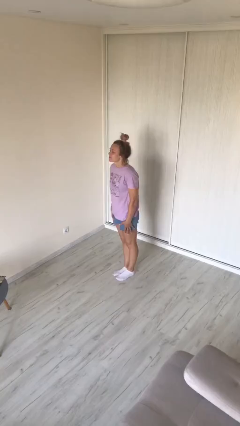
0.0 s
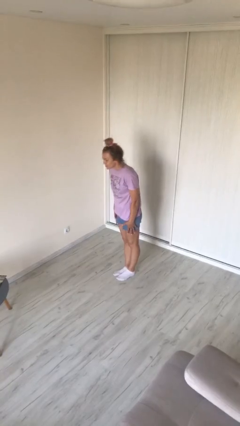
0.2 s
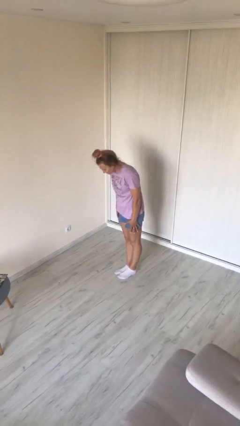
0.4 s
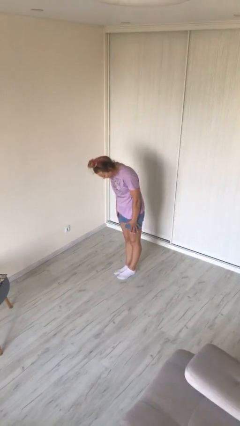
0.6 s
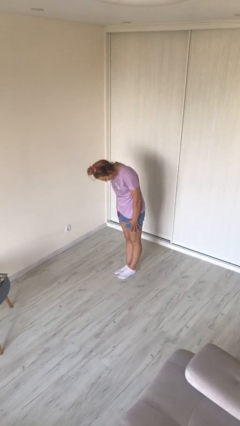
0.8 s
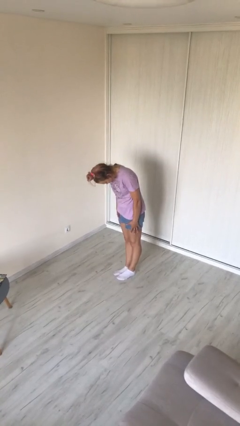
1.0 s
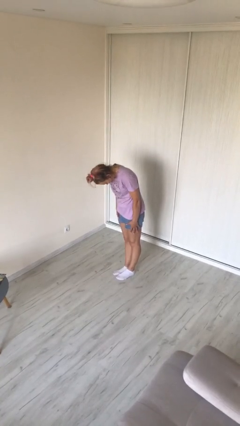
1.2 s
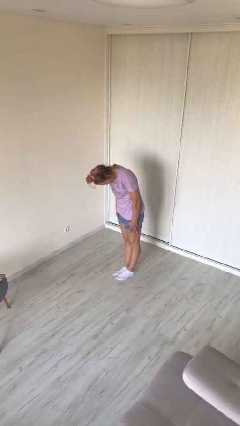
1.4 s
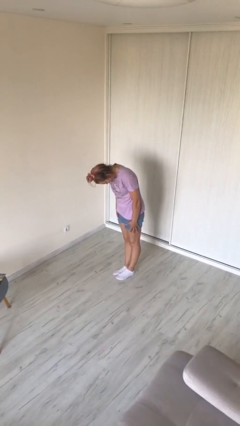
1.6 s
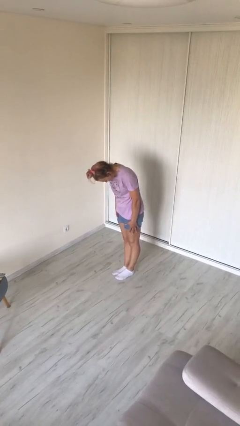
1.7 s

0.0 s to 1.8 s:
person bows

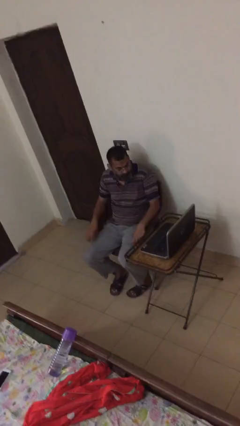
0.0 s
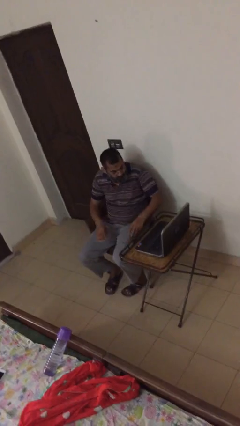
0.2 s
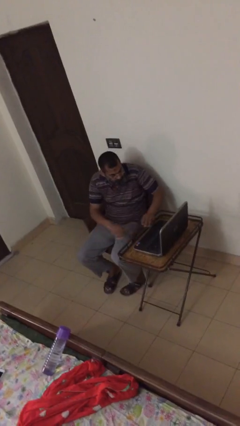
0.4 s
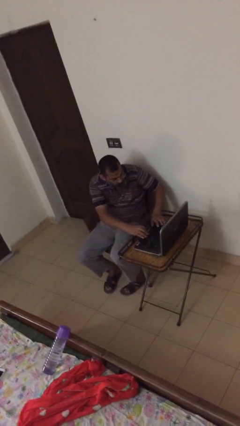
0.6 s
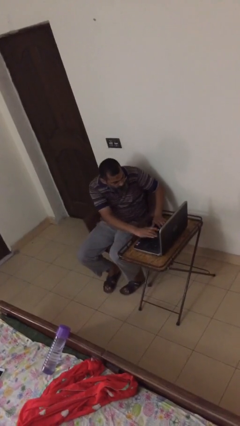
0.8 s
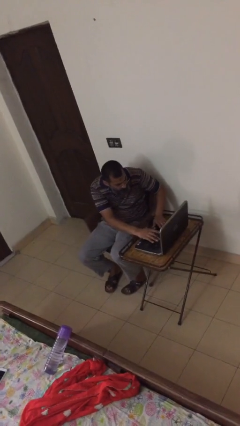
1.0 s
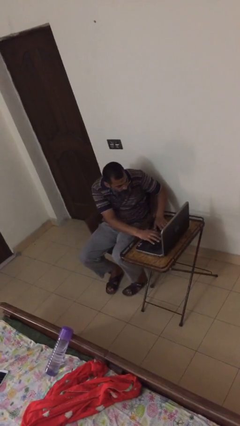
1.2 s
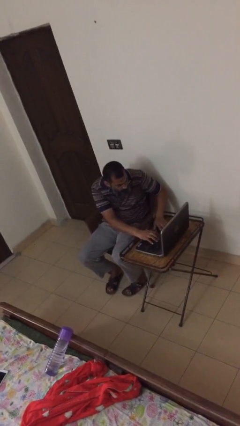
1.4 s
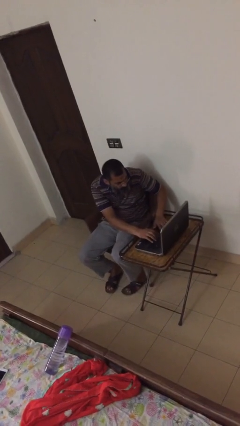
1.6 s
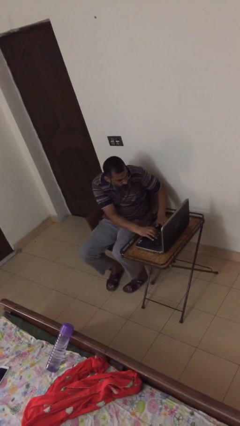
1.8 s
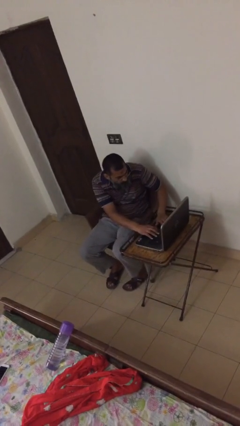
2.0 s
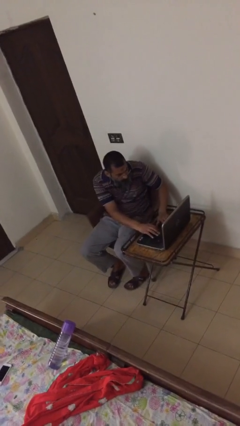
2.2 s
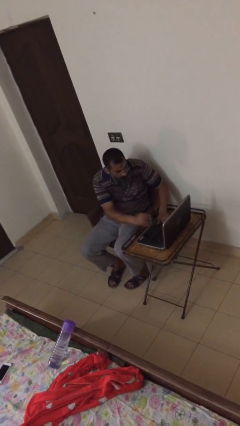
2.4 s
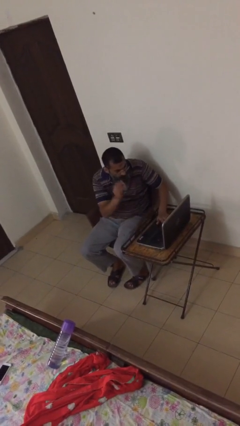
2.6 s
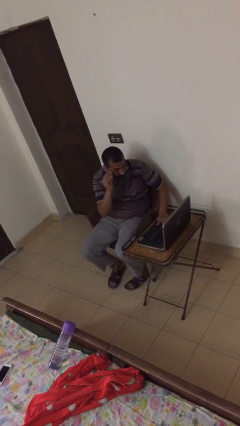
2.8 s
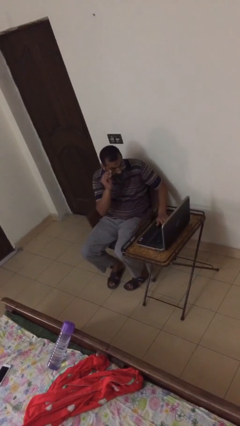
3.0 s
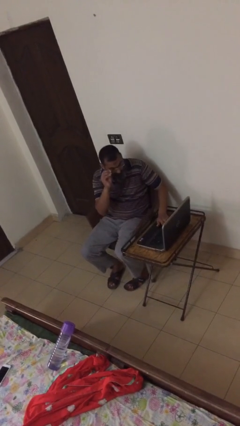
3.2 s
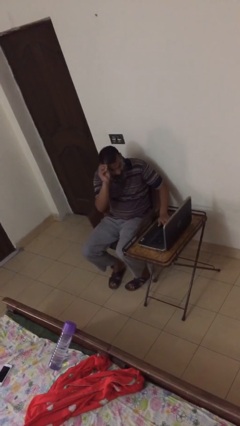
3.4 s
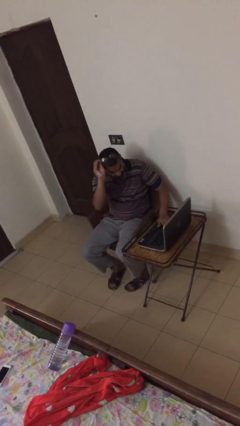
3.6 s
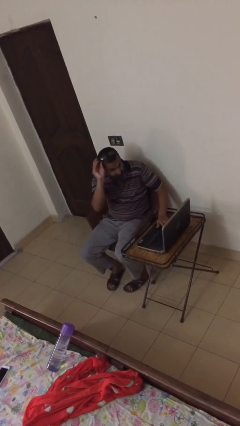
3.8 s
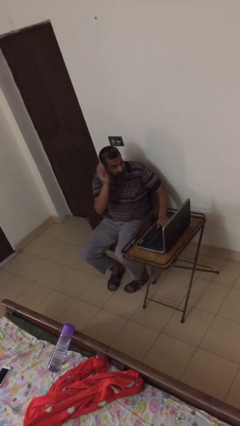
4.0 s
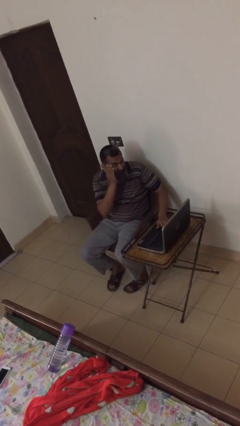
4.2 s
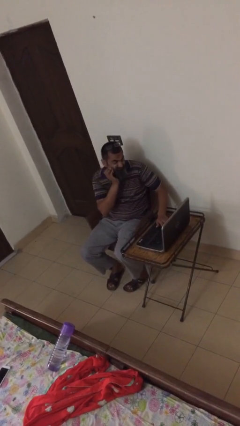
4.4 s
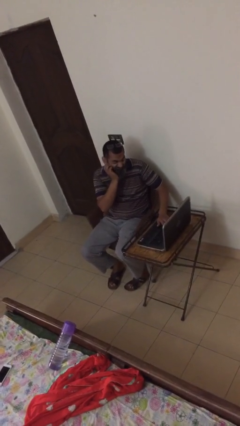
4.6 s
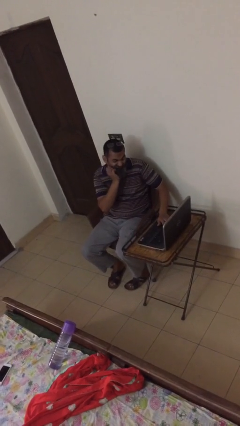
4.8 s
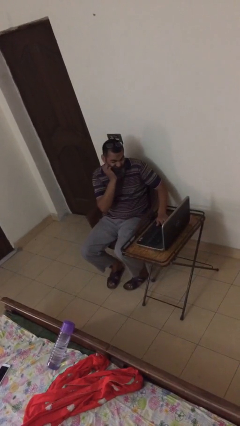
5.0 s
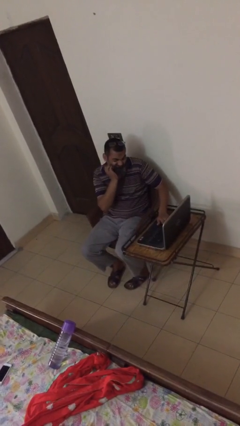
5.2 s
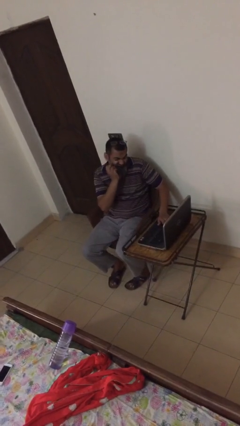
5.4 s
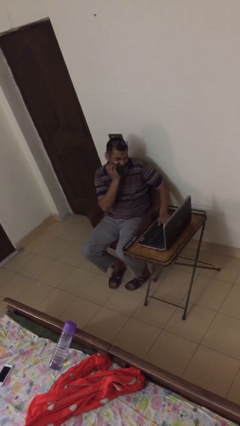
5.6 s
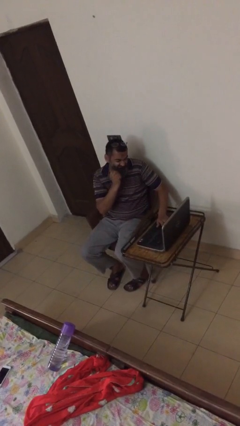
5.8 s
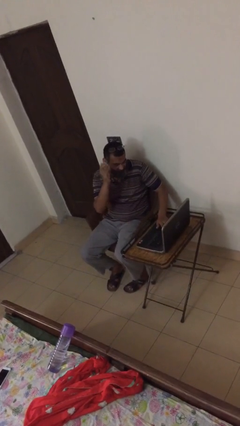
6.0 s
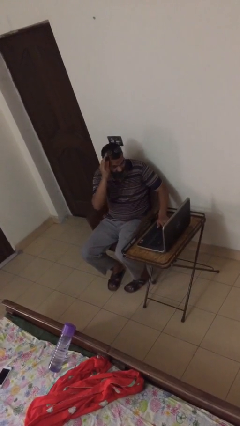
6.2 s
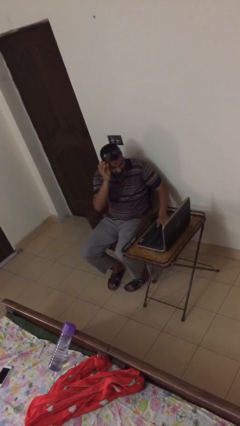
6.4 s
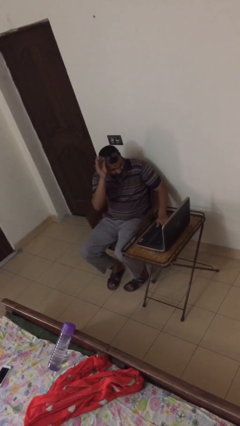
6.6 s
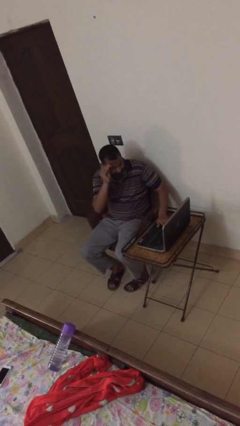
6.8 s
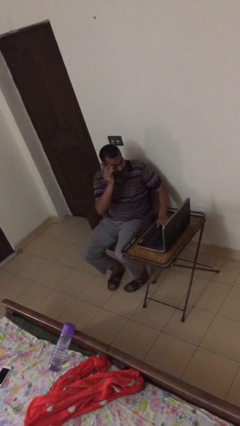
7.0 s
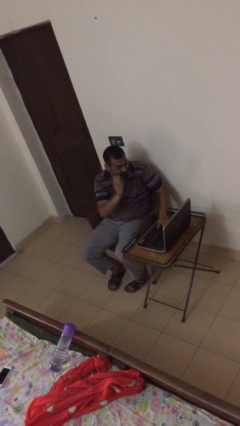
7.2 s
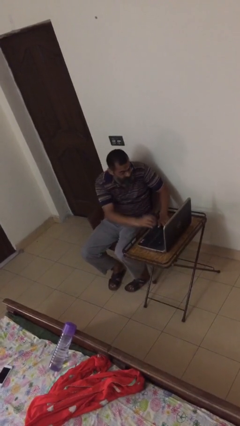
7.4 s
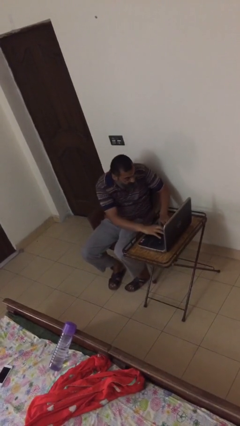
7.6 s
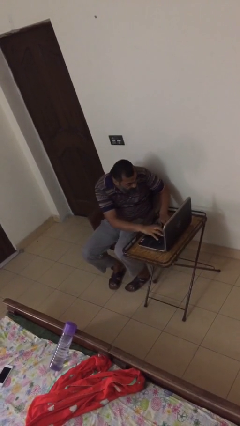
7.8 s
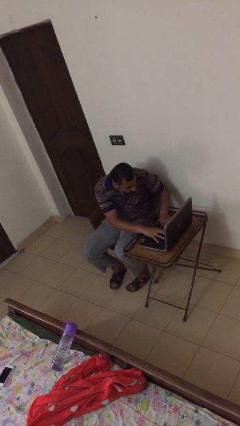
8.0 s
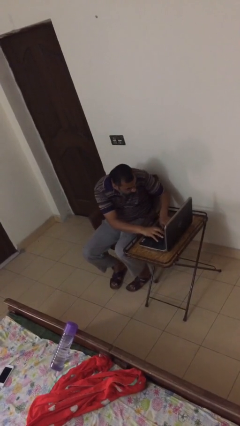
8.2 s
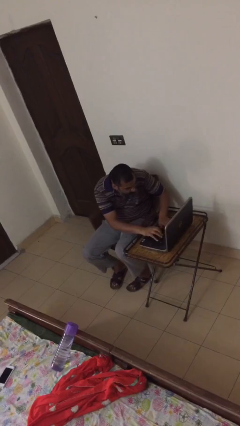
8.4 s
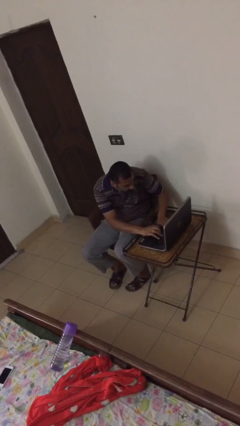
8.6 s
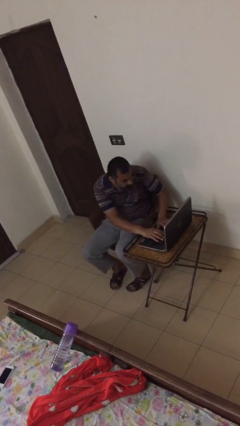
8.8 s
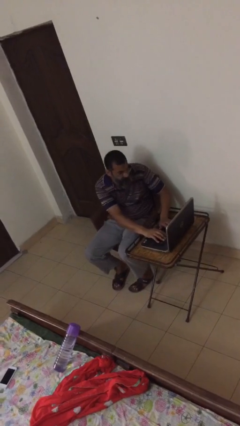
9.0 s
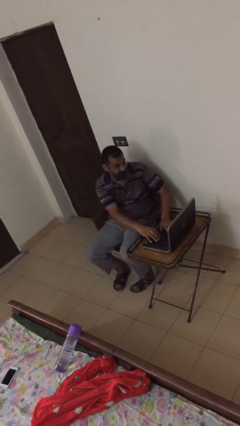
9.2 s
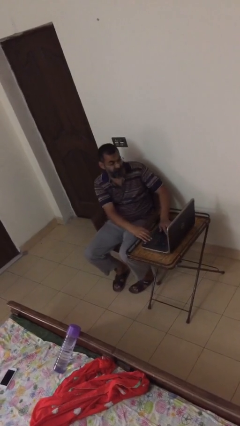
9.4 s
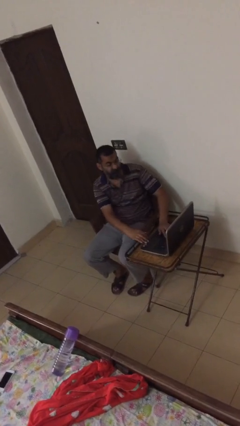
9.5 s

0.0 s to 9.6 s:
person interacts with laptop

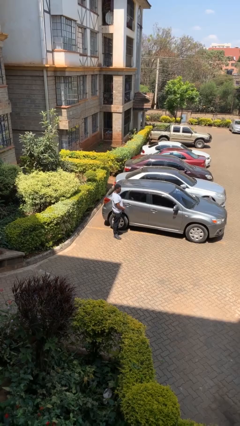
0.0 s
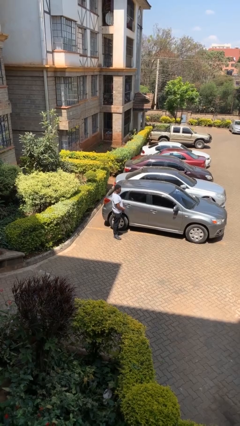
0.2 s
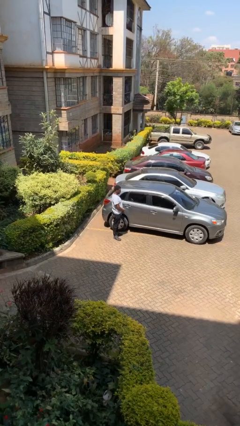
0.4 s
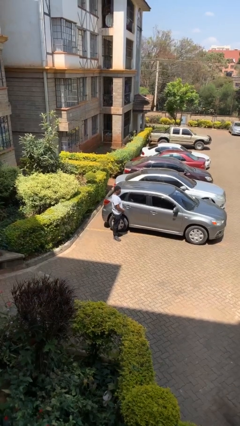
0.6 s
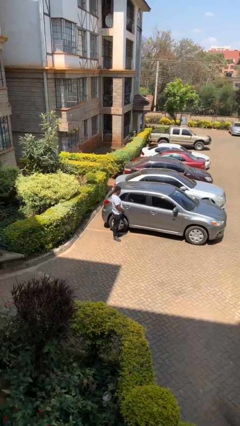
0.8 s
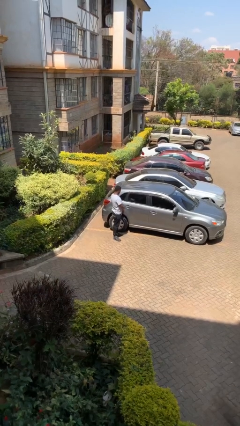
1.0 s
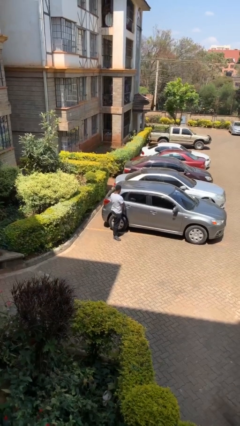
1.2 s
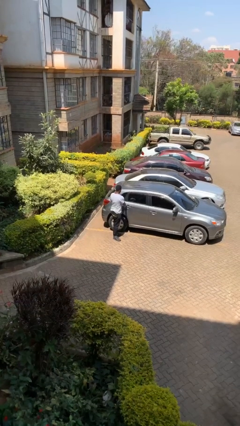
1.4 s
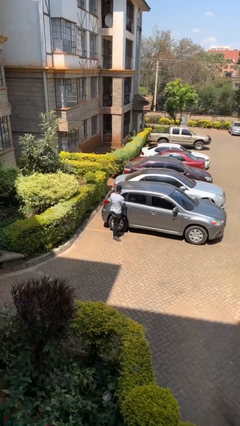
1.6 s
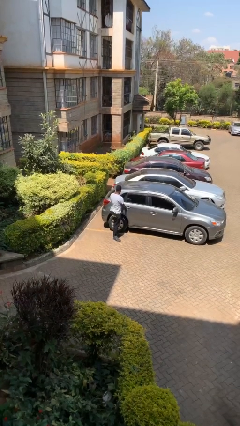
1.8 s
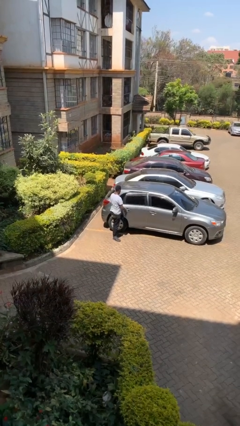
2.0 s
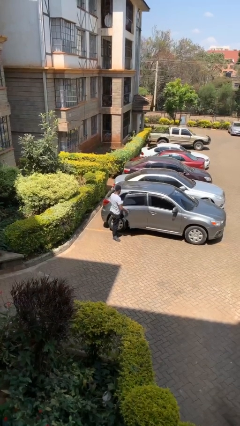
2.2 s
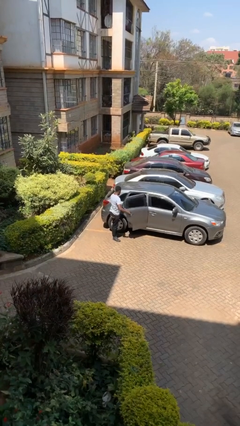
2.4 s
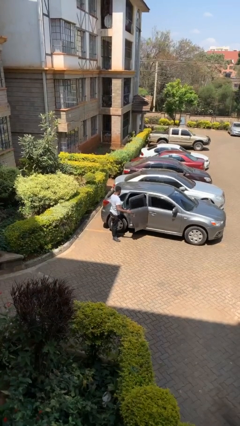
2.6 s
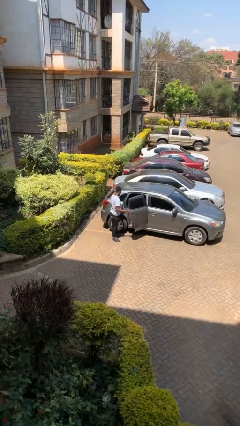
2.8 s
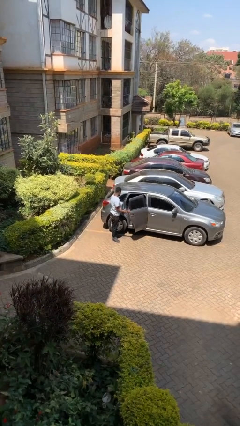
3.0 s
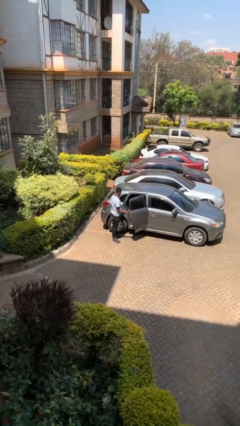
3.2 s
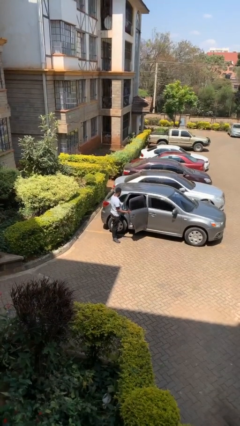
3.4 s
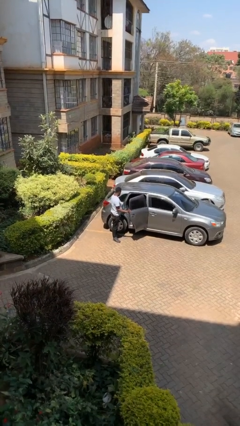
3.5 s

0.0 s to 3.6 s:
person opens car door

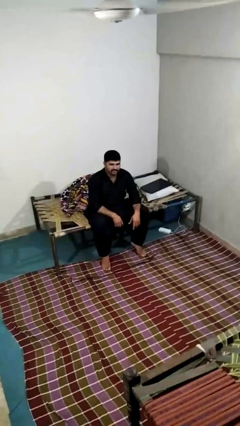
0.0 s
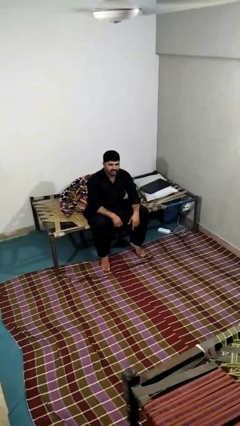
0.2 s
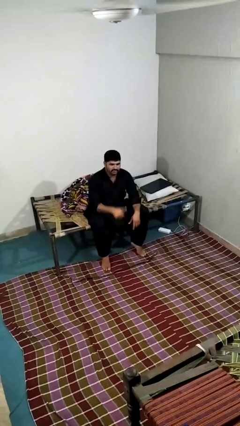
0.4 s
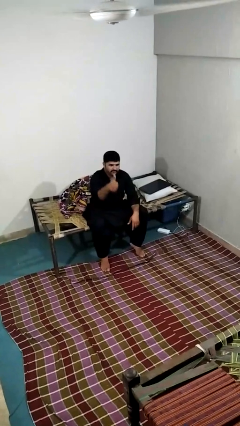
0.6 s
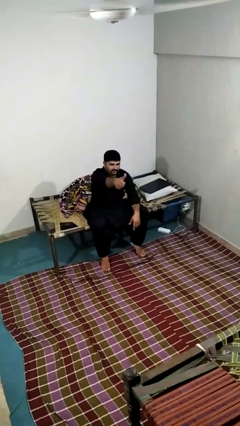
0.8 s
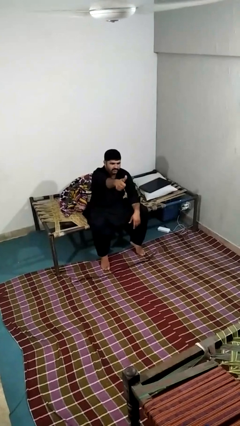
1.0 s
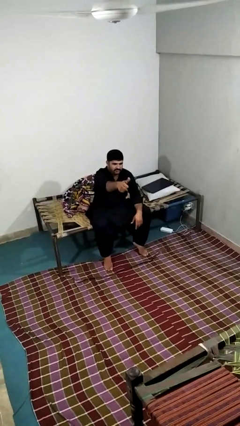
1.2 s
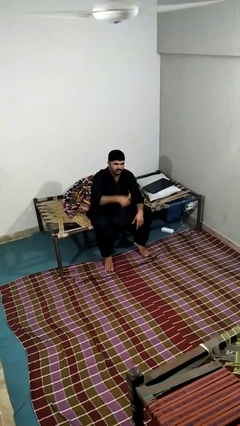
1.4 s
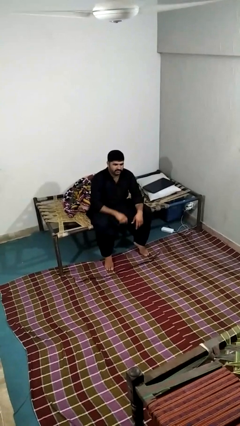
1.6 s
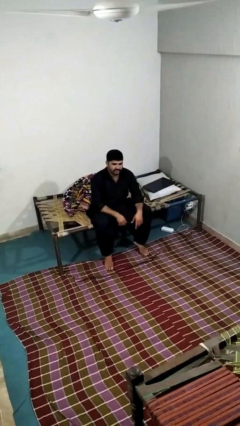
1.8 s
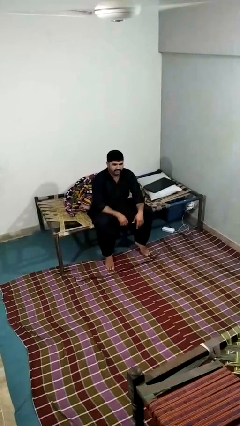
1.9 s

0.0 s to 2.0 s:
person gestures thumbs up

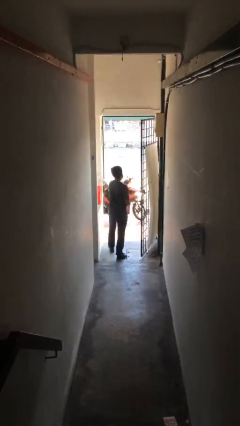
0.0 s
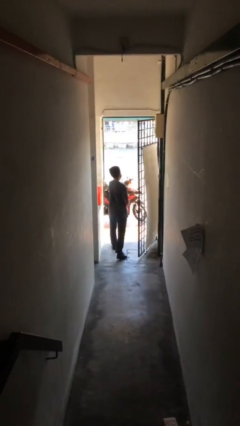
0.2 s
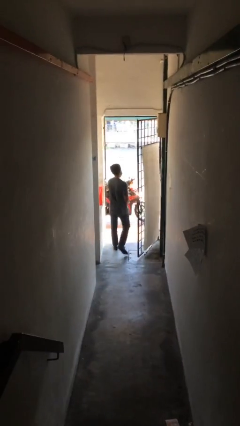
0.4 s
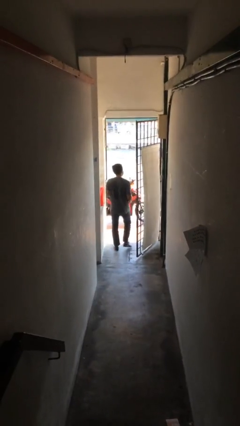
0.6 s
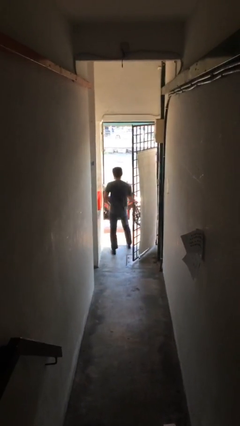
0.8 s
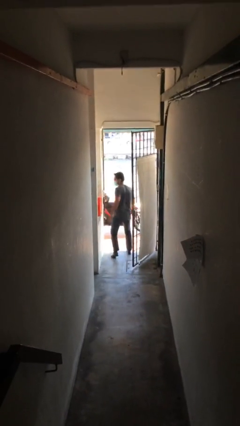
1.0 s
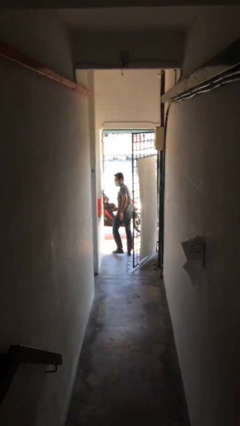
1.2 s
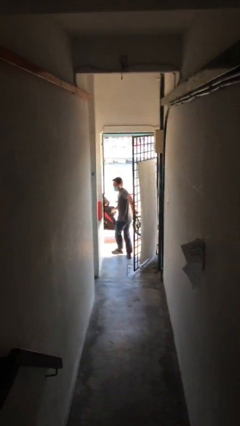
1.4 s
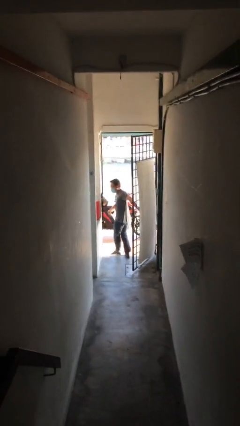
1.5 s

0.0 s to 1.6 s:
person exits scene through structure
